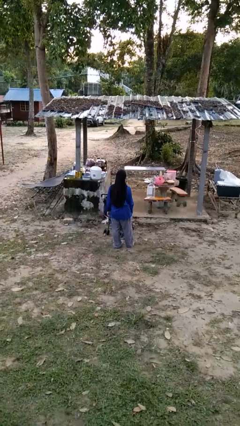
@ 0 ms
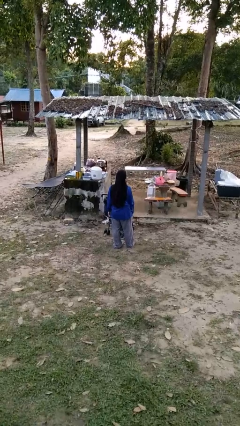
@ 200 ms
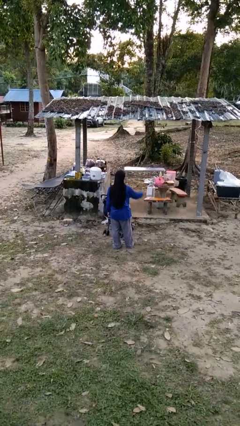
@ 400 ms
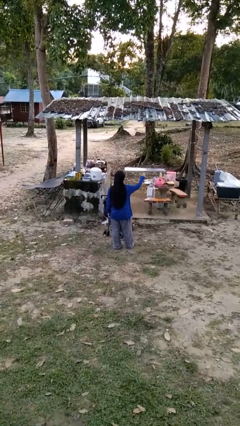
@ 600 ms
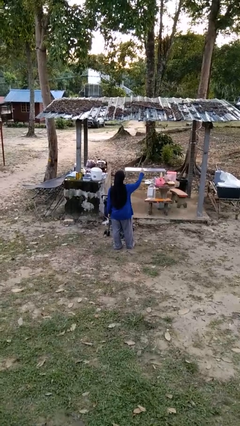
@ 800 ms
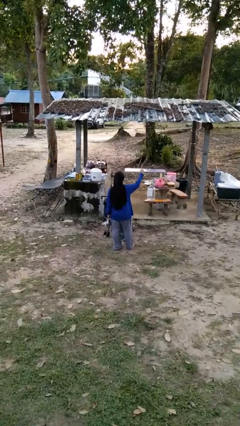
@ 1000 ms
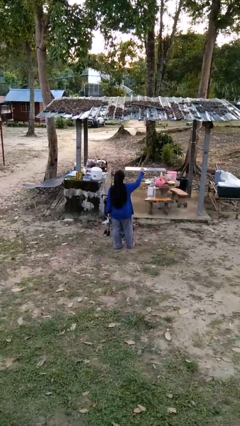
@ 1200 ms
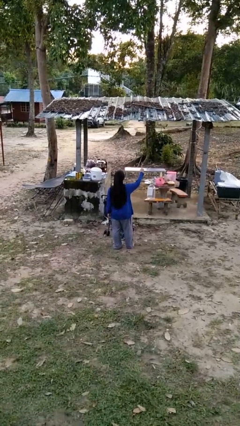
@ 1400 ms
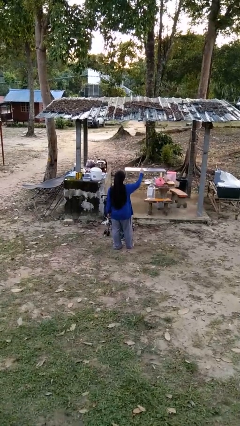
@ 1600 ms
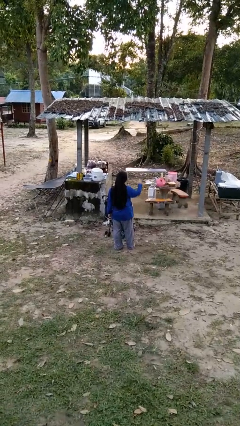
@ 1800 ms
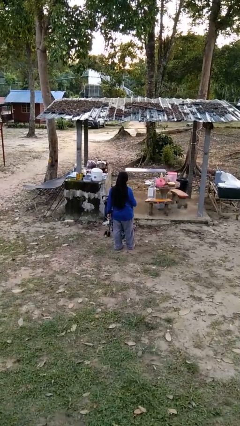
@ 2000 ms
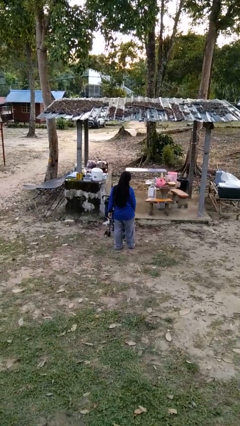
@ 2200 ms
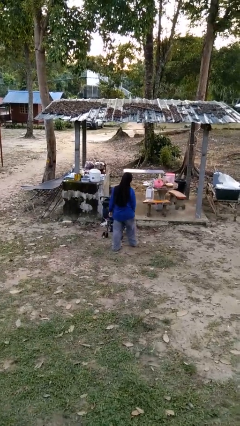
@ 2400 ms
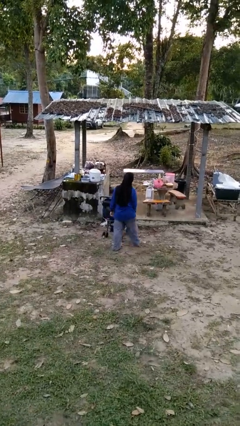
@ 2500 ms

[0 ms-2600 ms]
person gestures number one

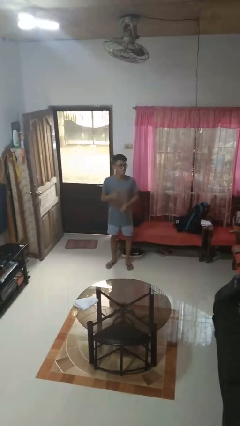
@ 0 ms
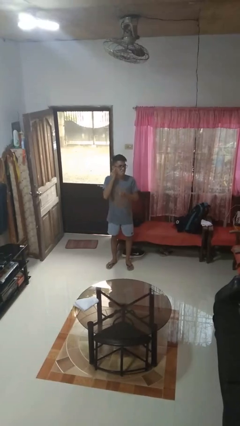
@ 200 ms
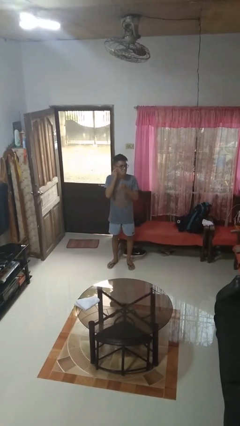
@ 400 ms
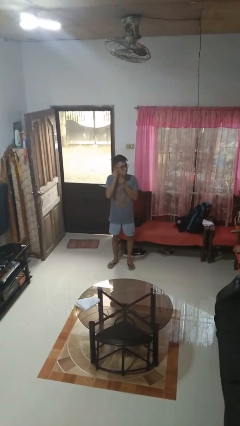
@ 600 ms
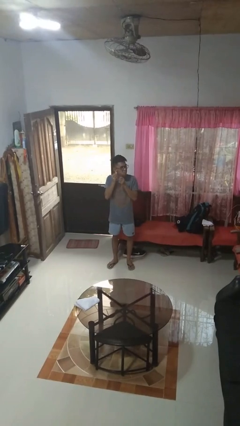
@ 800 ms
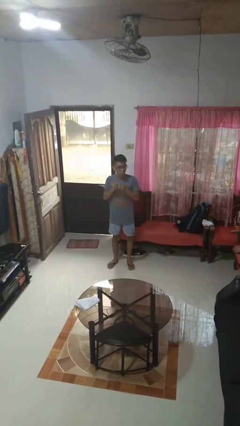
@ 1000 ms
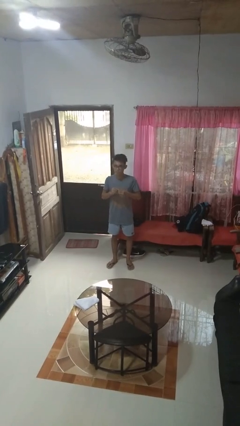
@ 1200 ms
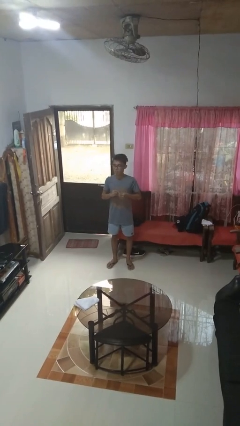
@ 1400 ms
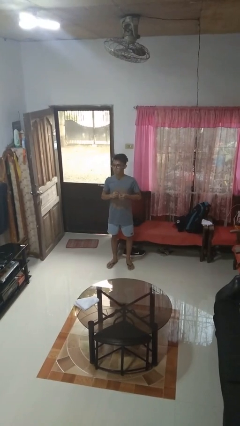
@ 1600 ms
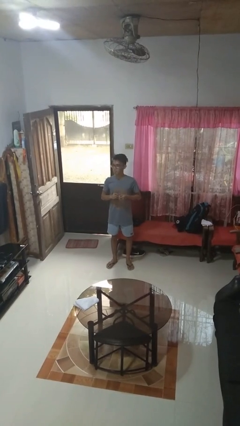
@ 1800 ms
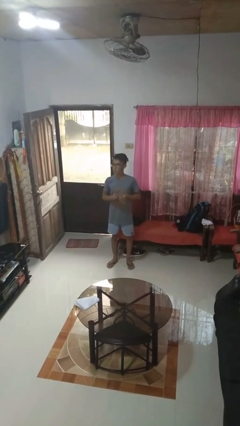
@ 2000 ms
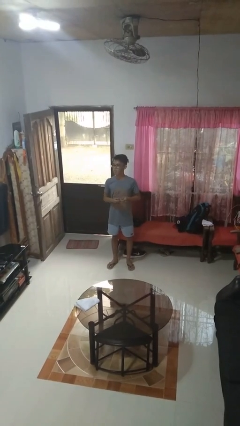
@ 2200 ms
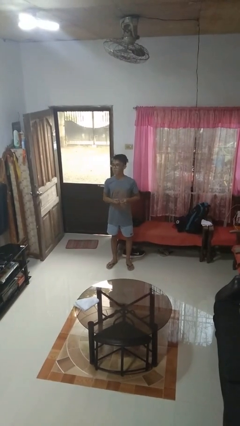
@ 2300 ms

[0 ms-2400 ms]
person takes off earrings

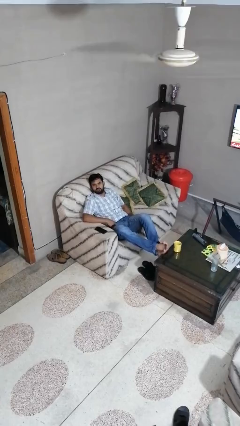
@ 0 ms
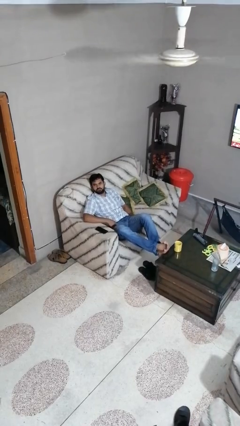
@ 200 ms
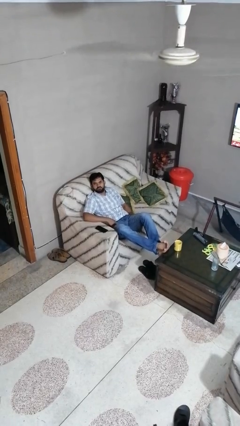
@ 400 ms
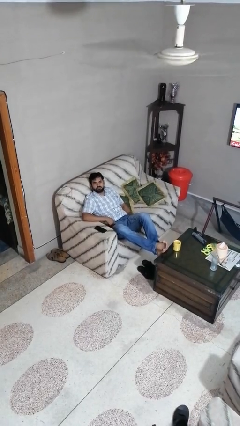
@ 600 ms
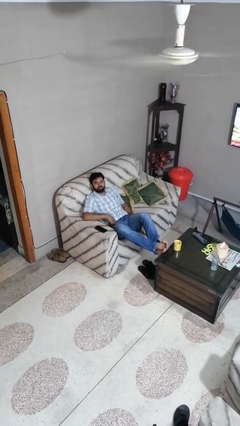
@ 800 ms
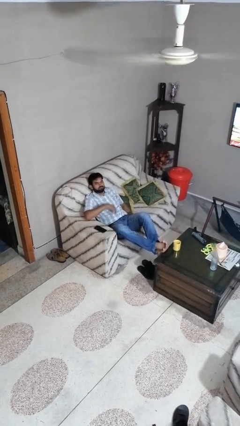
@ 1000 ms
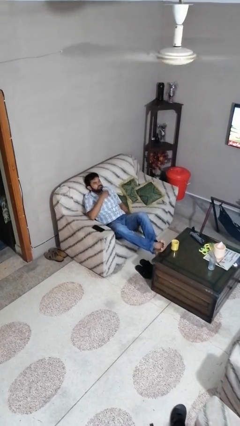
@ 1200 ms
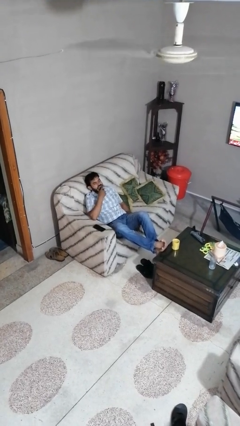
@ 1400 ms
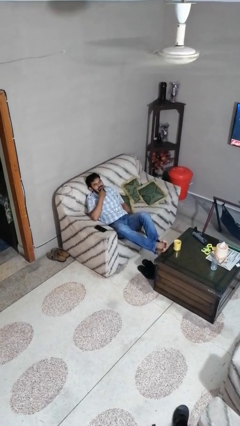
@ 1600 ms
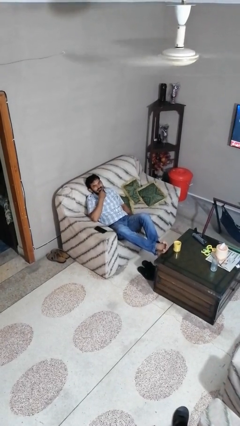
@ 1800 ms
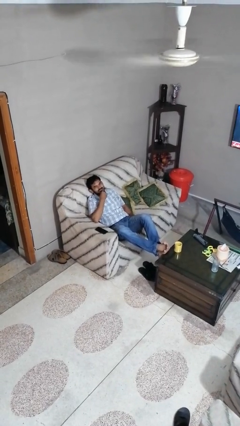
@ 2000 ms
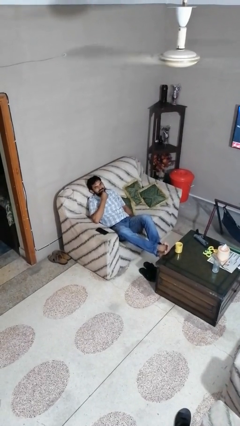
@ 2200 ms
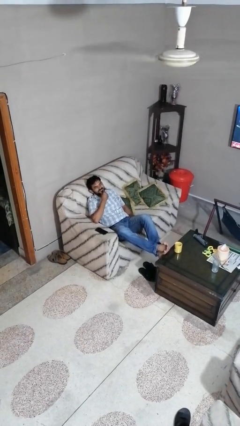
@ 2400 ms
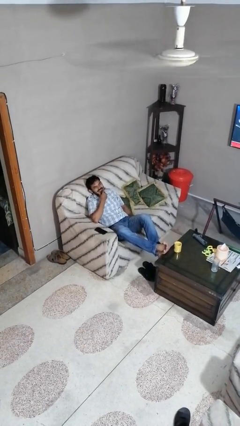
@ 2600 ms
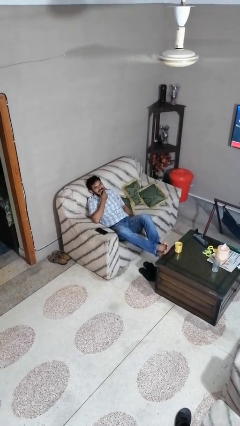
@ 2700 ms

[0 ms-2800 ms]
person strokes chin

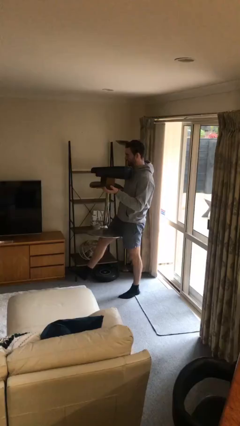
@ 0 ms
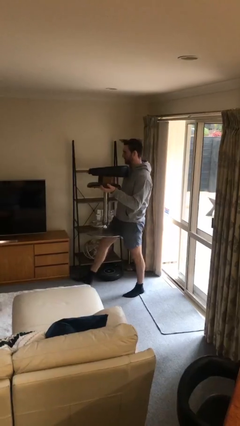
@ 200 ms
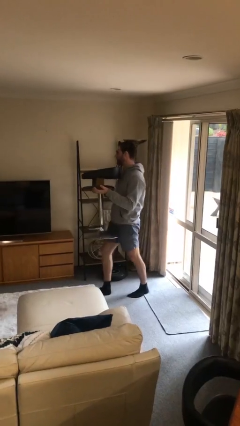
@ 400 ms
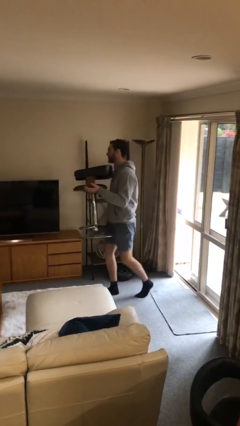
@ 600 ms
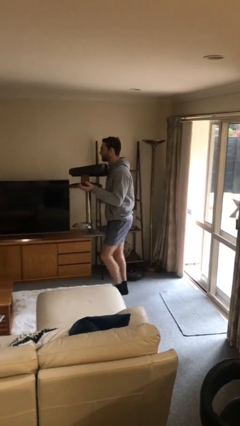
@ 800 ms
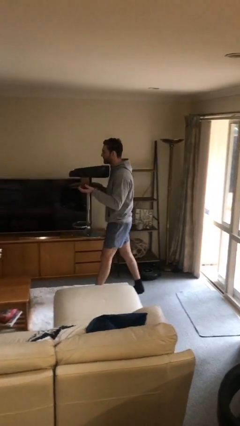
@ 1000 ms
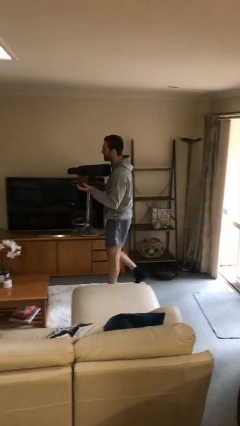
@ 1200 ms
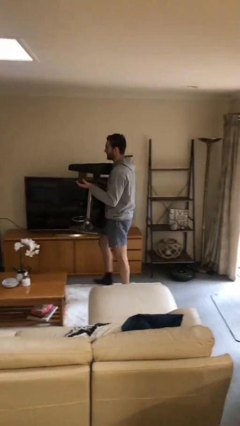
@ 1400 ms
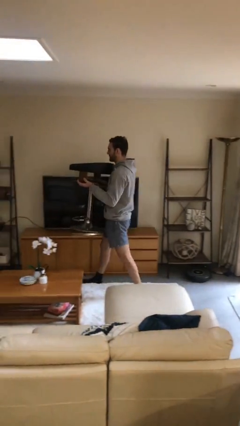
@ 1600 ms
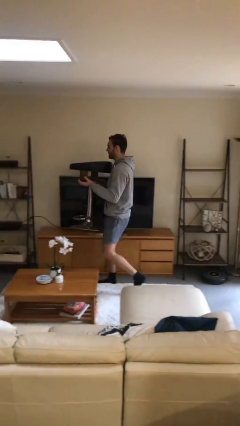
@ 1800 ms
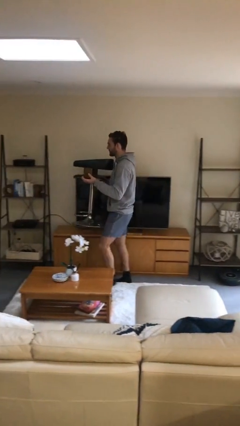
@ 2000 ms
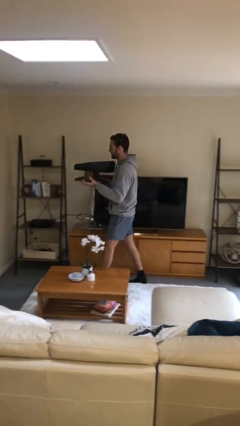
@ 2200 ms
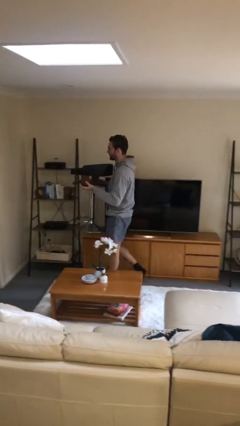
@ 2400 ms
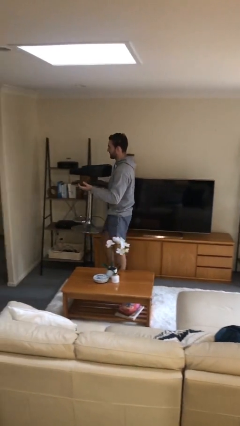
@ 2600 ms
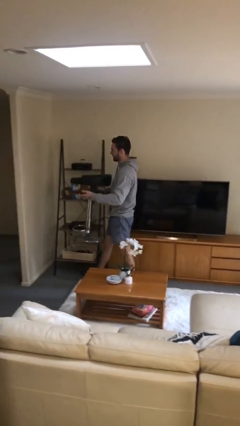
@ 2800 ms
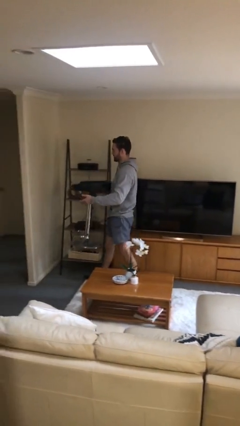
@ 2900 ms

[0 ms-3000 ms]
person carries heavy object

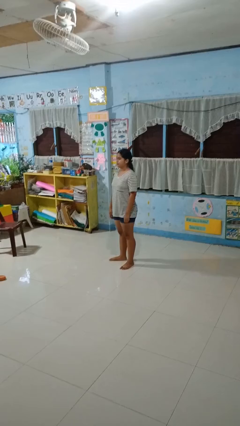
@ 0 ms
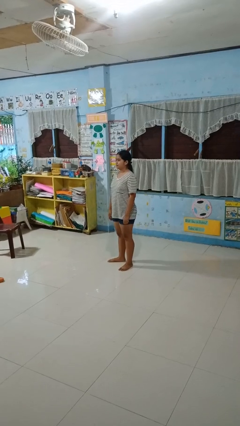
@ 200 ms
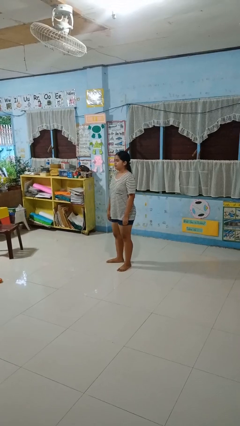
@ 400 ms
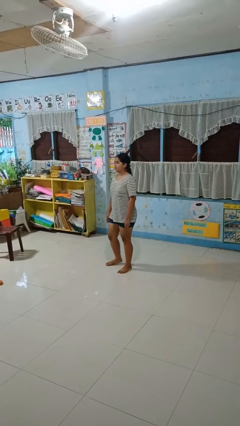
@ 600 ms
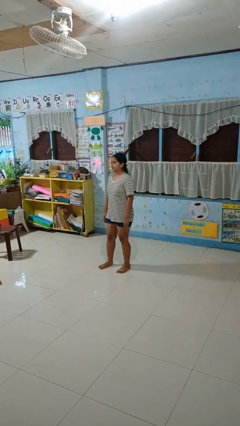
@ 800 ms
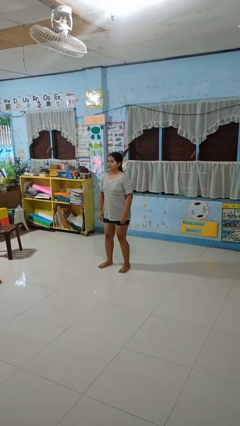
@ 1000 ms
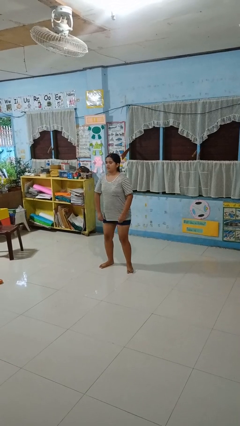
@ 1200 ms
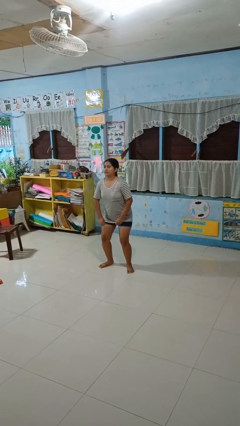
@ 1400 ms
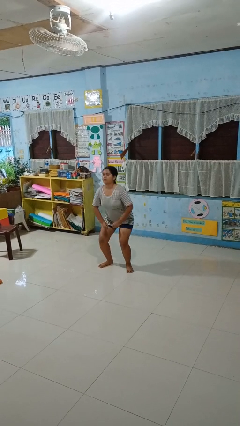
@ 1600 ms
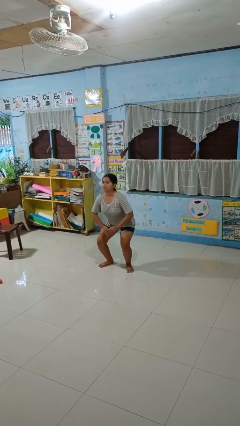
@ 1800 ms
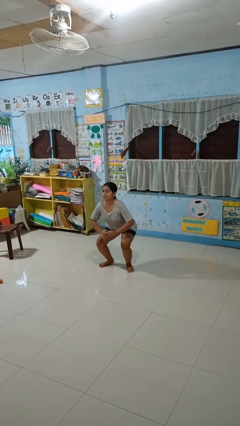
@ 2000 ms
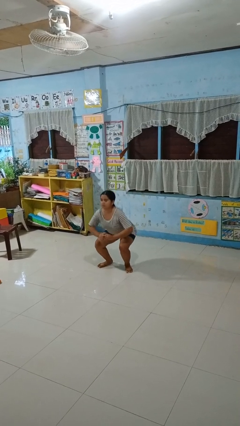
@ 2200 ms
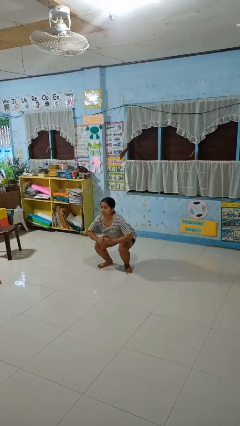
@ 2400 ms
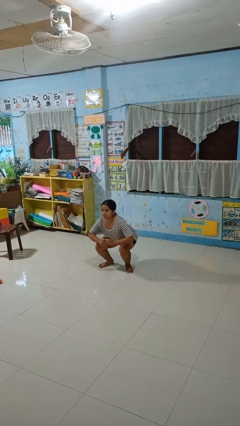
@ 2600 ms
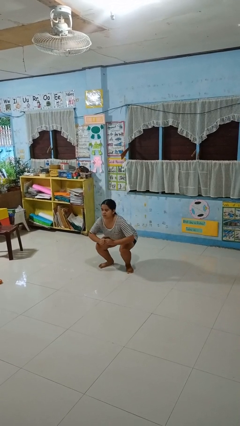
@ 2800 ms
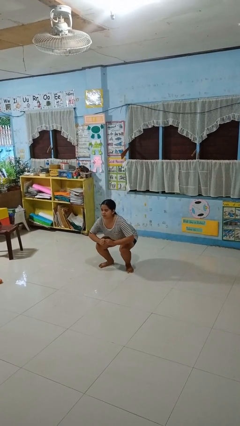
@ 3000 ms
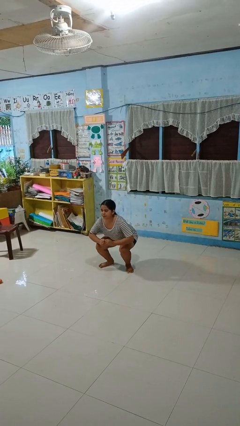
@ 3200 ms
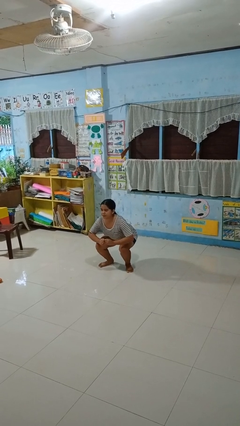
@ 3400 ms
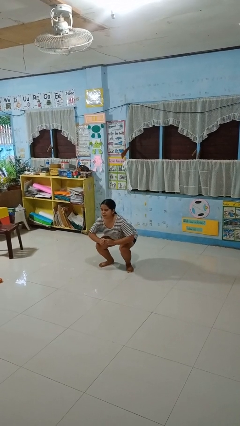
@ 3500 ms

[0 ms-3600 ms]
person squats

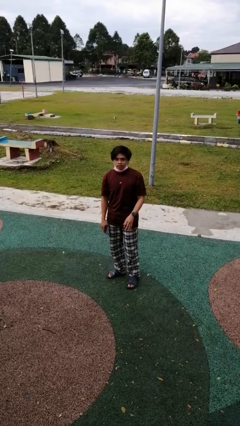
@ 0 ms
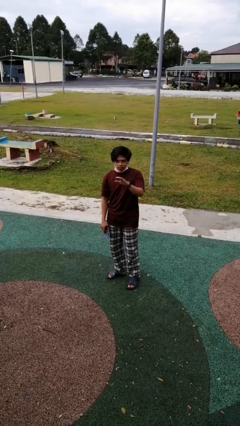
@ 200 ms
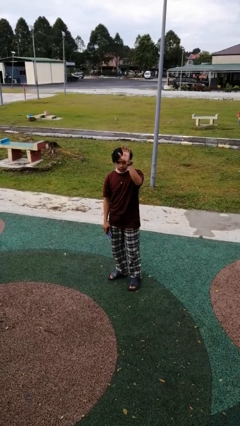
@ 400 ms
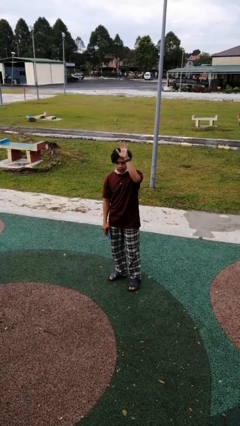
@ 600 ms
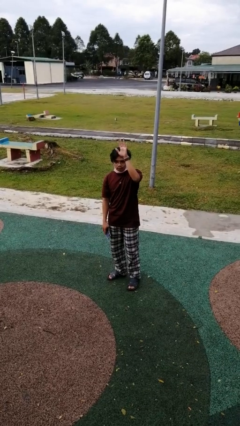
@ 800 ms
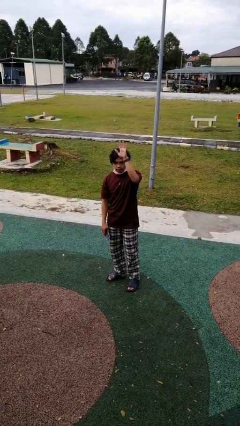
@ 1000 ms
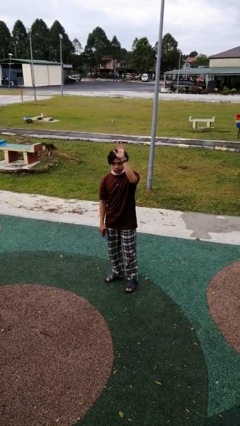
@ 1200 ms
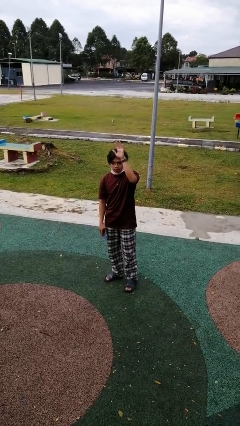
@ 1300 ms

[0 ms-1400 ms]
person gestures raise hand

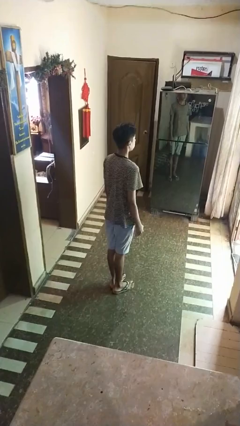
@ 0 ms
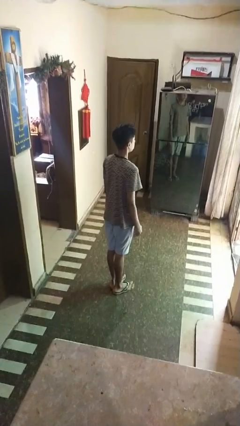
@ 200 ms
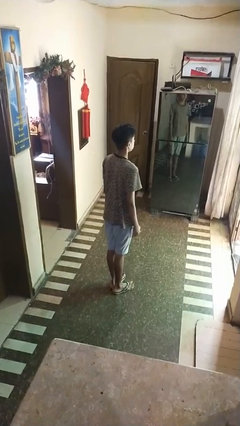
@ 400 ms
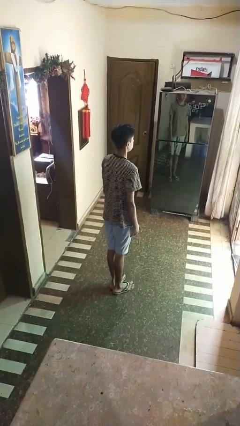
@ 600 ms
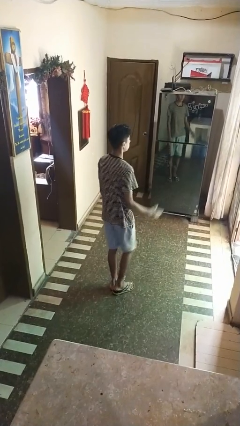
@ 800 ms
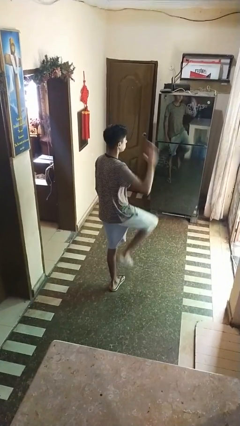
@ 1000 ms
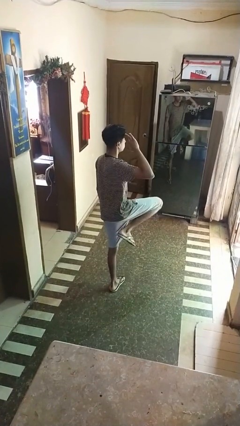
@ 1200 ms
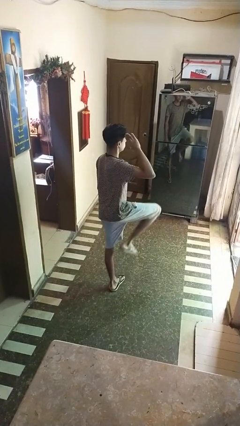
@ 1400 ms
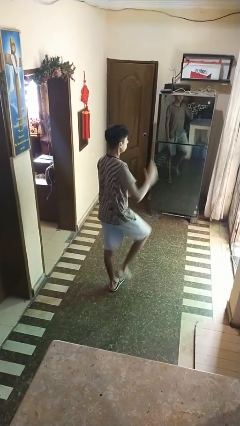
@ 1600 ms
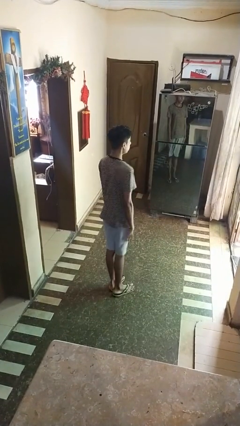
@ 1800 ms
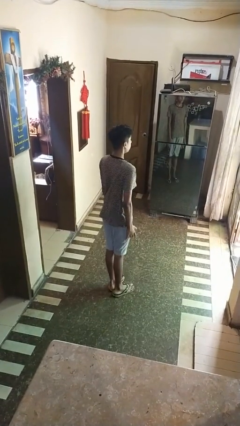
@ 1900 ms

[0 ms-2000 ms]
person salutes
